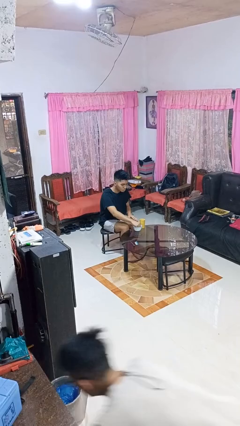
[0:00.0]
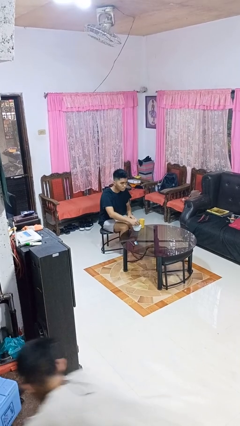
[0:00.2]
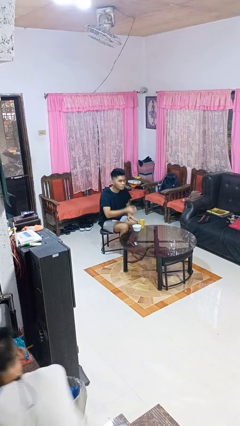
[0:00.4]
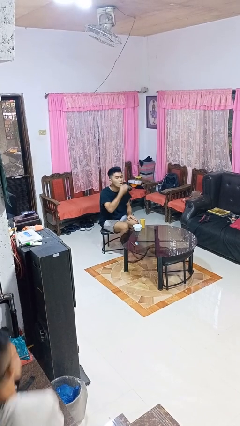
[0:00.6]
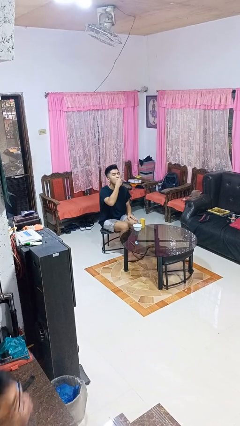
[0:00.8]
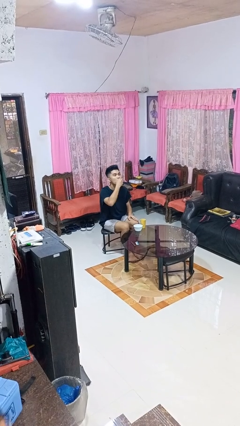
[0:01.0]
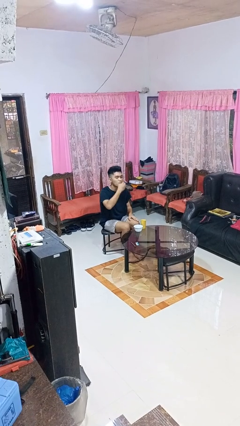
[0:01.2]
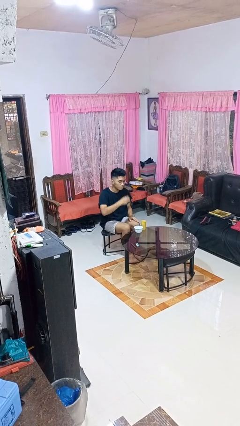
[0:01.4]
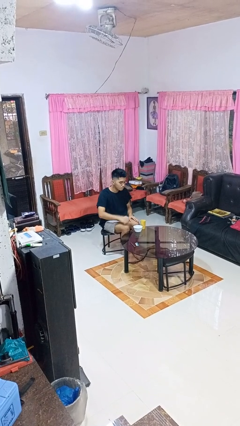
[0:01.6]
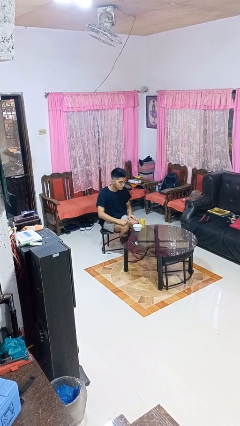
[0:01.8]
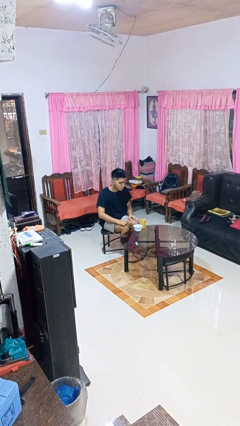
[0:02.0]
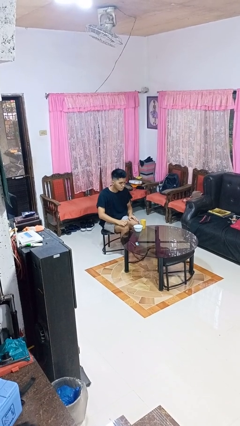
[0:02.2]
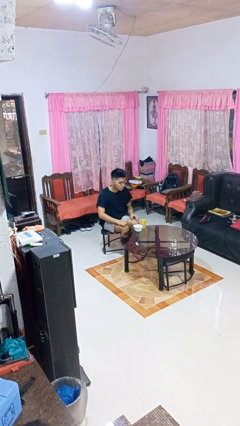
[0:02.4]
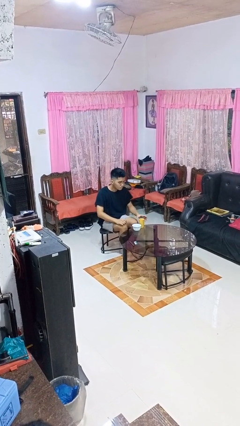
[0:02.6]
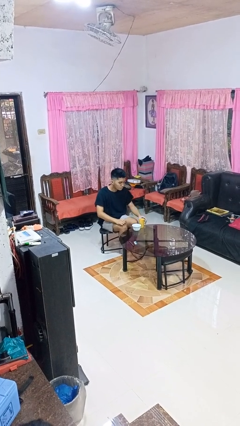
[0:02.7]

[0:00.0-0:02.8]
person takes medicine pills

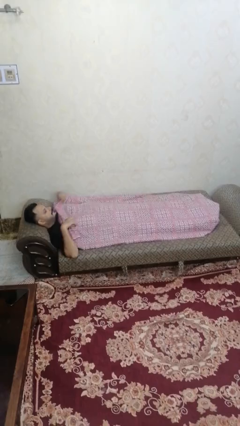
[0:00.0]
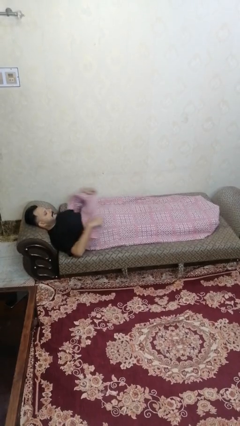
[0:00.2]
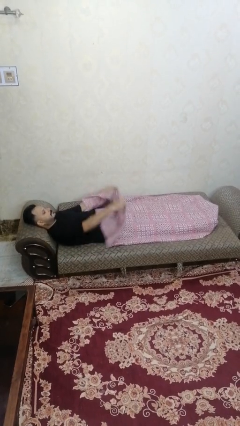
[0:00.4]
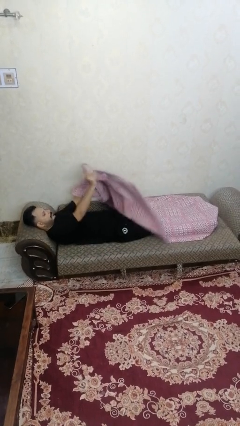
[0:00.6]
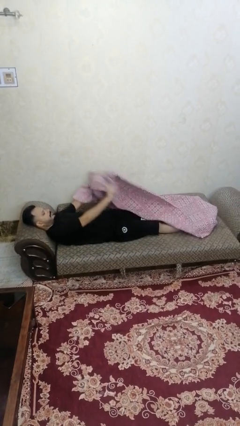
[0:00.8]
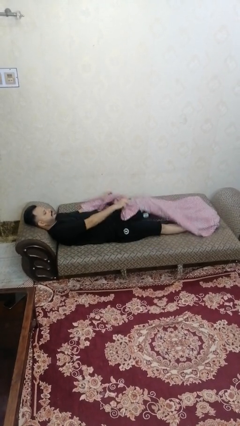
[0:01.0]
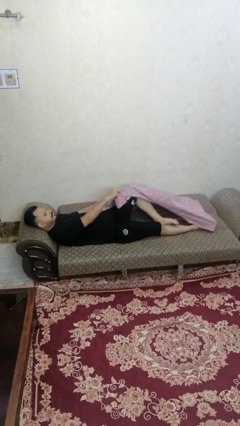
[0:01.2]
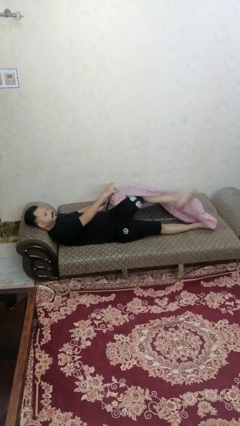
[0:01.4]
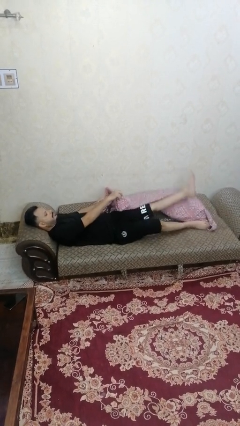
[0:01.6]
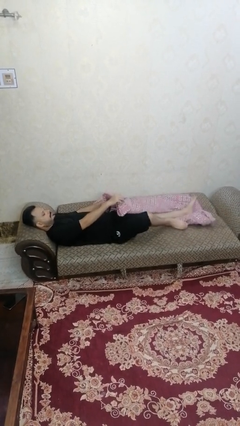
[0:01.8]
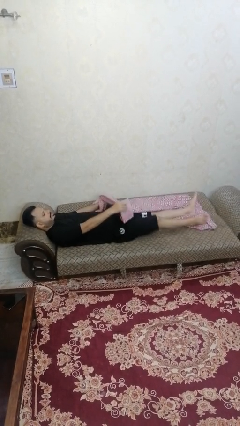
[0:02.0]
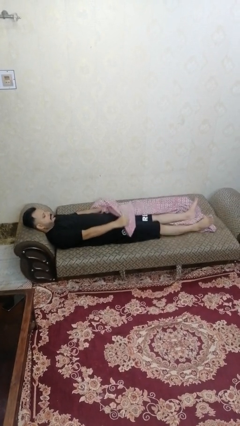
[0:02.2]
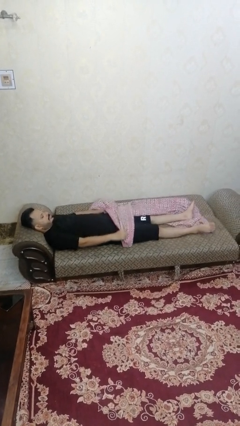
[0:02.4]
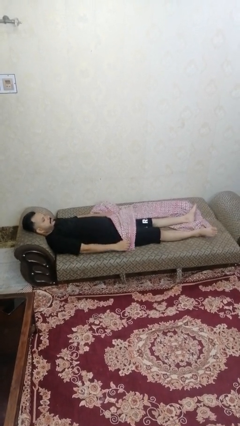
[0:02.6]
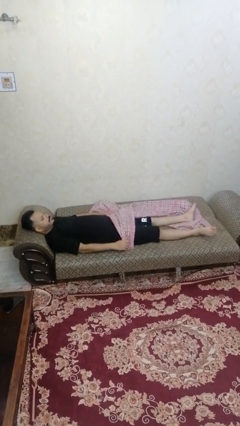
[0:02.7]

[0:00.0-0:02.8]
person uncovers with bedsheets

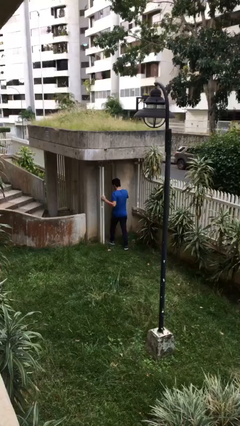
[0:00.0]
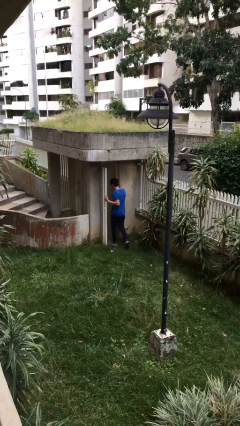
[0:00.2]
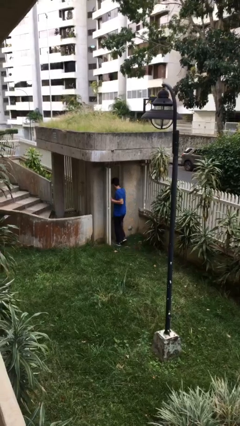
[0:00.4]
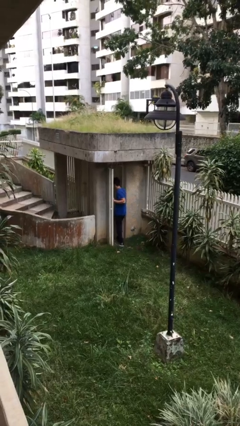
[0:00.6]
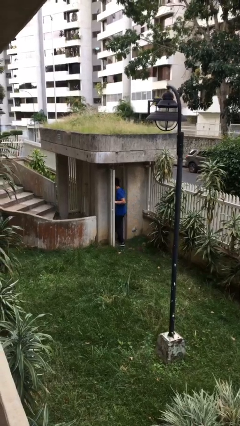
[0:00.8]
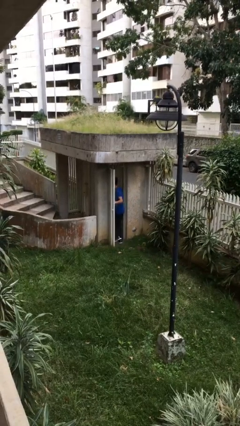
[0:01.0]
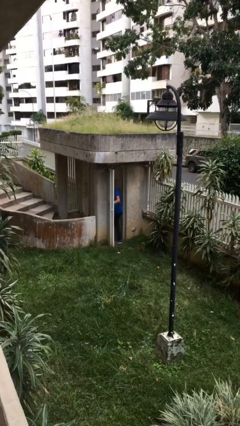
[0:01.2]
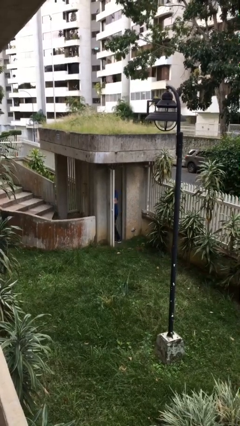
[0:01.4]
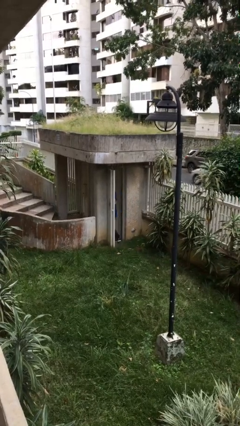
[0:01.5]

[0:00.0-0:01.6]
person exits scene through structure

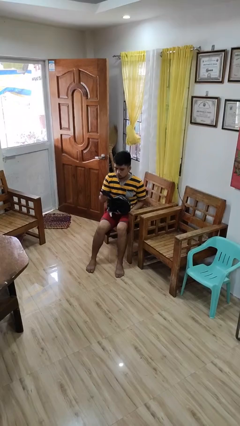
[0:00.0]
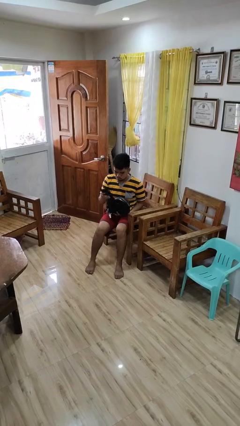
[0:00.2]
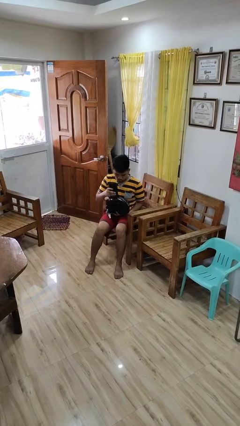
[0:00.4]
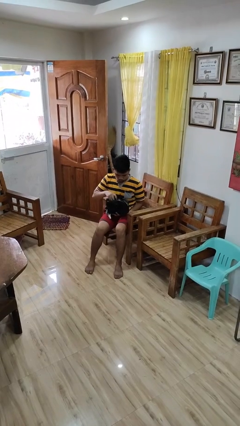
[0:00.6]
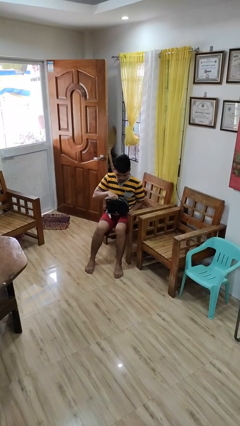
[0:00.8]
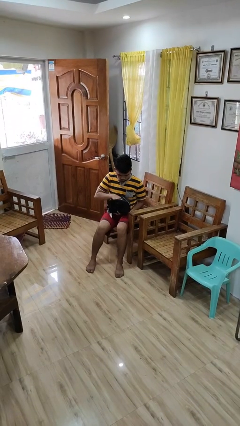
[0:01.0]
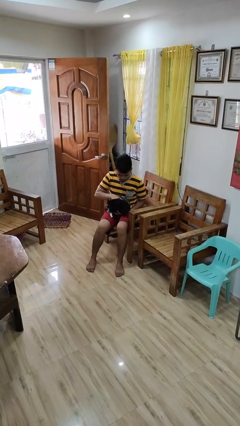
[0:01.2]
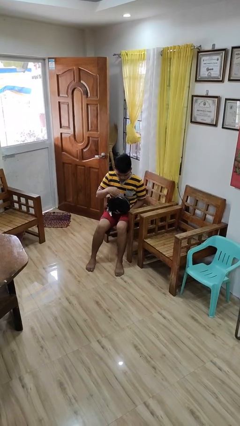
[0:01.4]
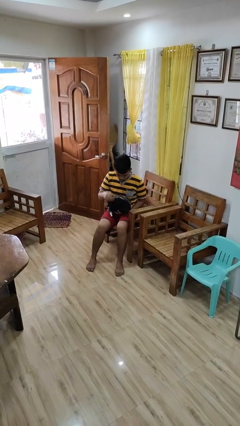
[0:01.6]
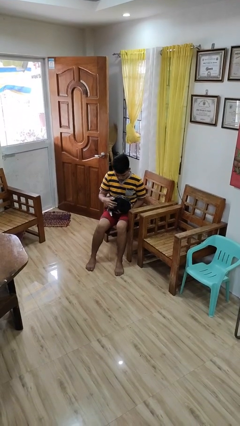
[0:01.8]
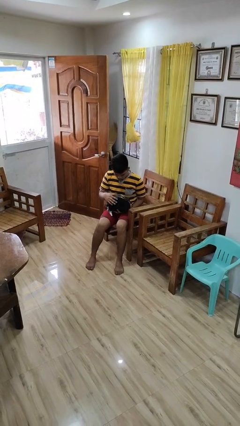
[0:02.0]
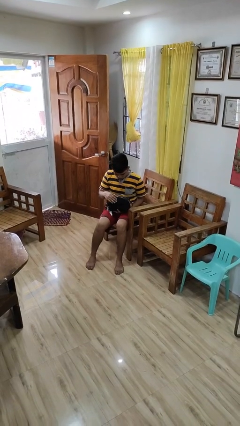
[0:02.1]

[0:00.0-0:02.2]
person puts object into purse

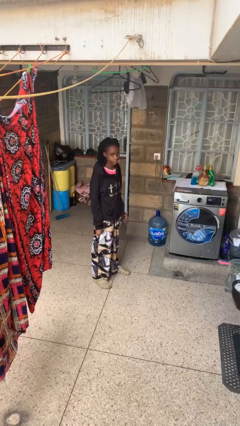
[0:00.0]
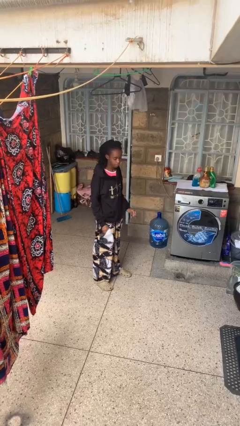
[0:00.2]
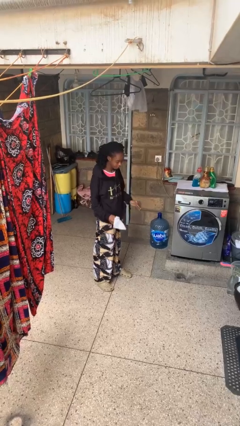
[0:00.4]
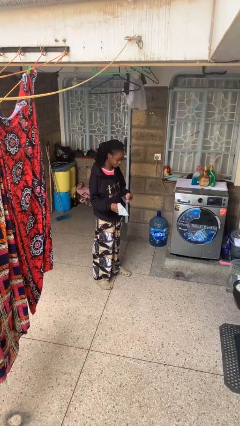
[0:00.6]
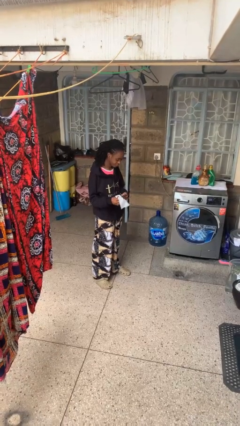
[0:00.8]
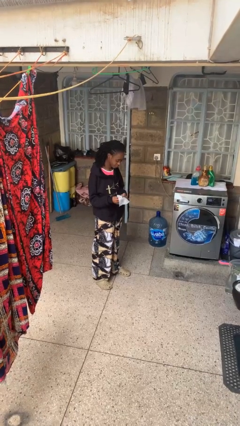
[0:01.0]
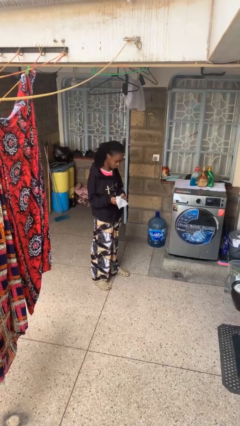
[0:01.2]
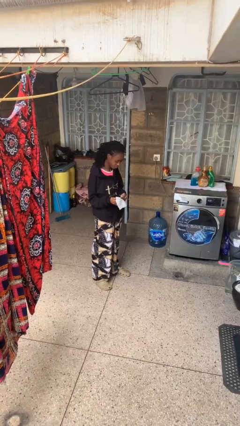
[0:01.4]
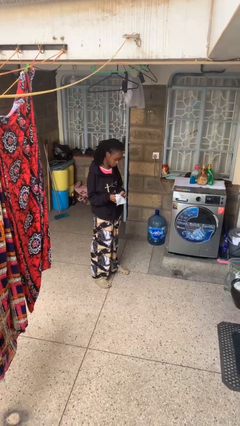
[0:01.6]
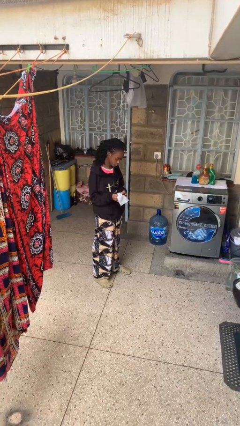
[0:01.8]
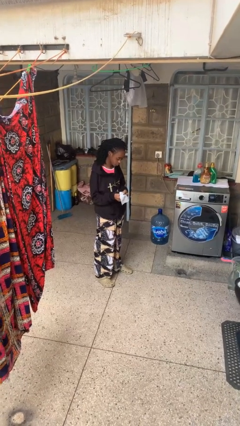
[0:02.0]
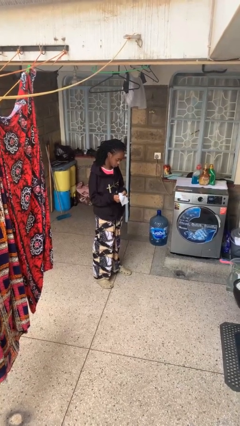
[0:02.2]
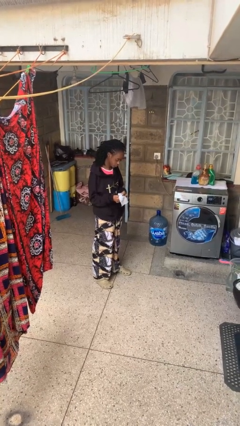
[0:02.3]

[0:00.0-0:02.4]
person cleans eyeglasses

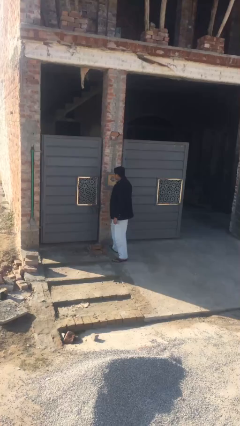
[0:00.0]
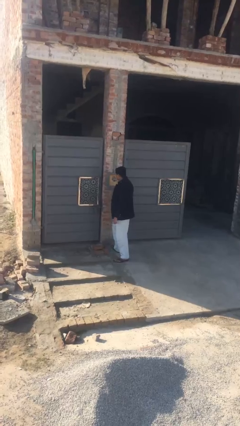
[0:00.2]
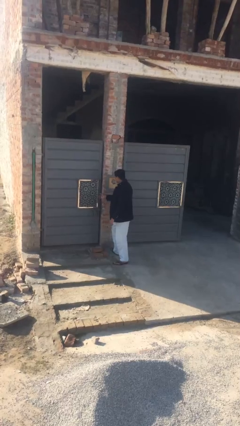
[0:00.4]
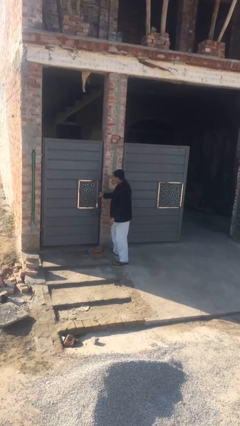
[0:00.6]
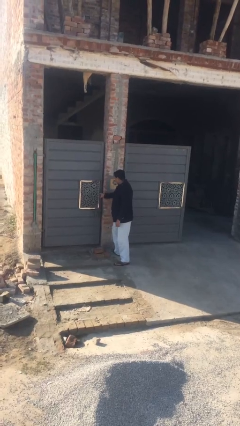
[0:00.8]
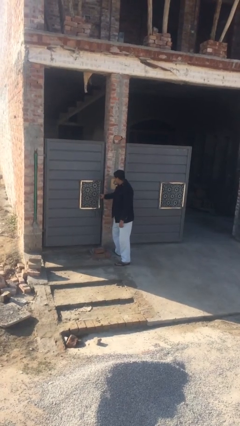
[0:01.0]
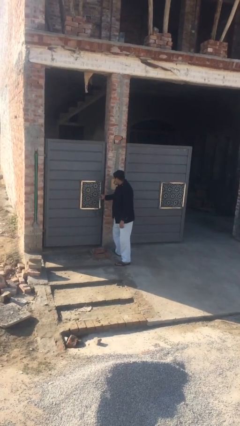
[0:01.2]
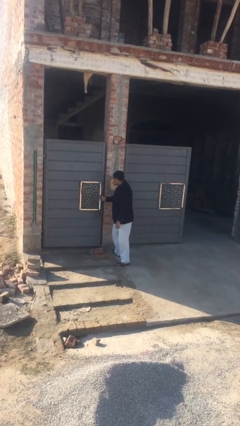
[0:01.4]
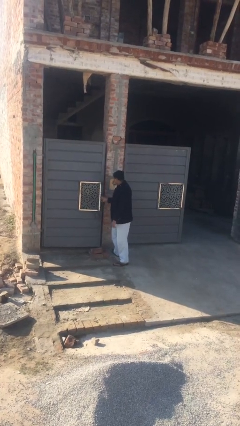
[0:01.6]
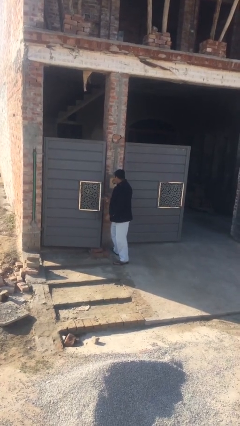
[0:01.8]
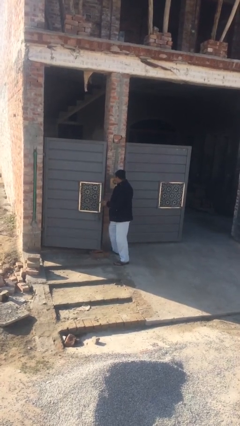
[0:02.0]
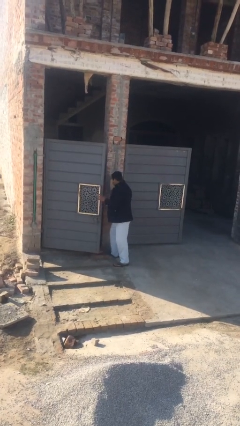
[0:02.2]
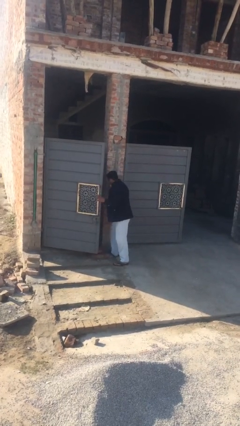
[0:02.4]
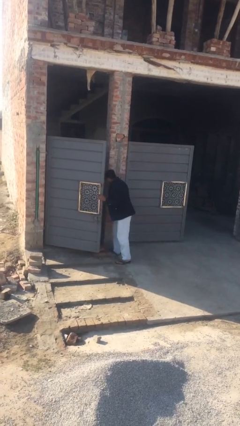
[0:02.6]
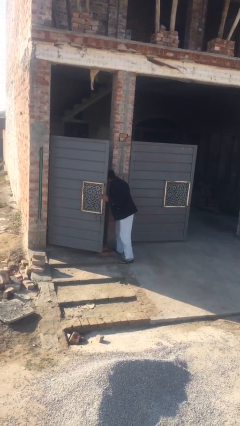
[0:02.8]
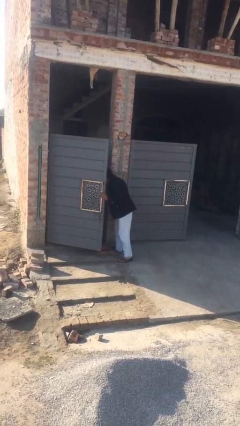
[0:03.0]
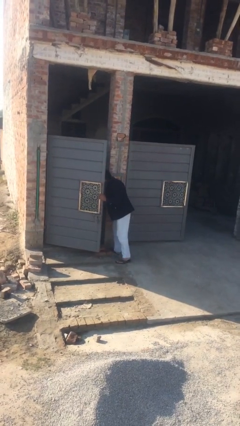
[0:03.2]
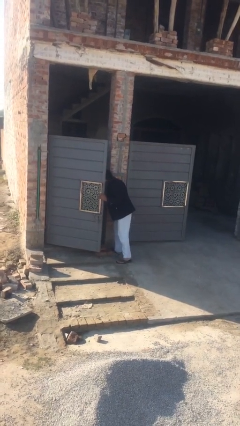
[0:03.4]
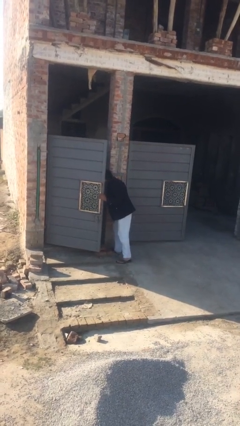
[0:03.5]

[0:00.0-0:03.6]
person opens facility door

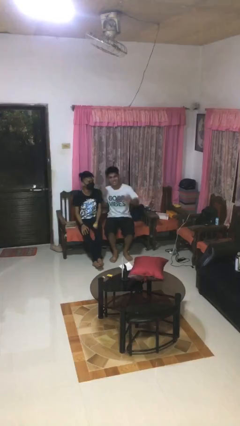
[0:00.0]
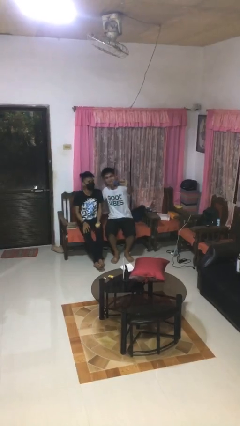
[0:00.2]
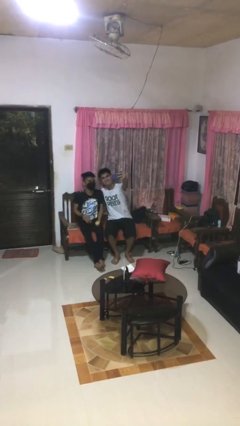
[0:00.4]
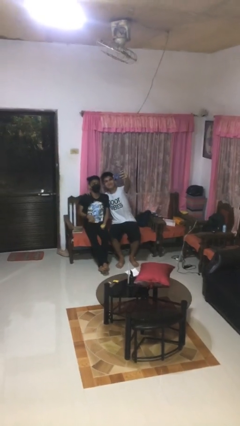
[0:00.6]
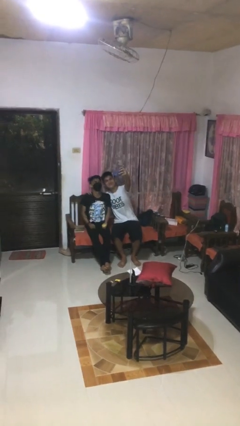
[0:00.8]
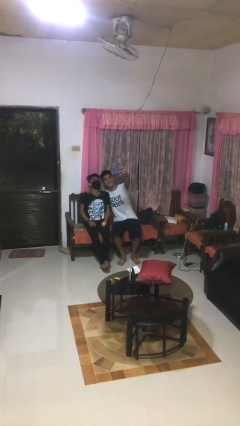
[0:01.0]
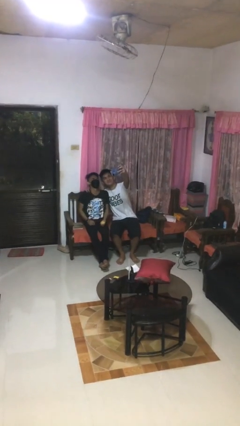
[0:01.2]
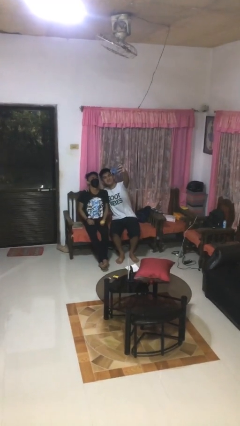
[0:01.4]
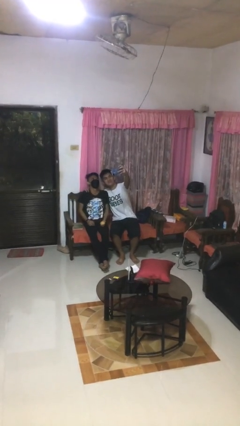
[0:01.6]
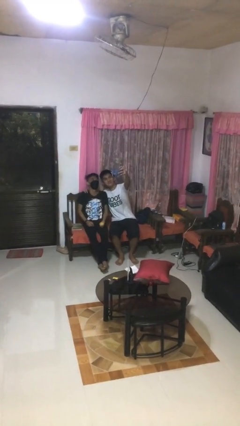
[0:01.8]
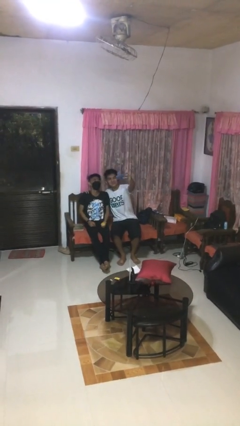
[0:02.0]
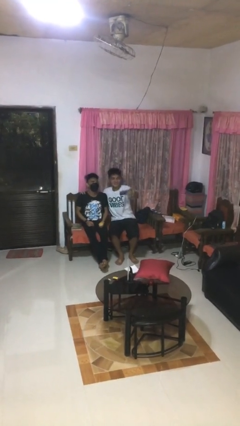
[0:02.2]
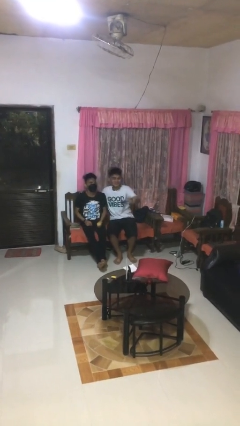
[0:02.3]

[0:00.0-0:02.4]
person takes selfie with person
